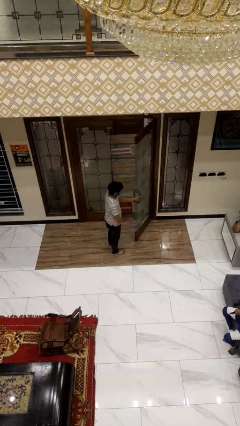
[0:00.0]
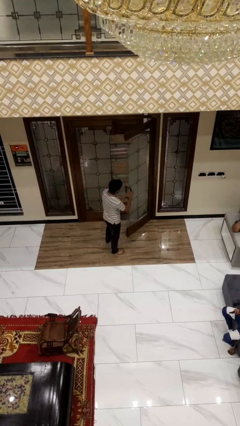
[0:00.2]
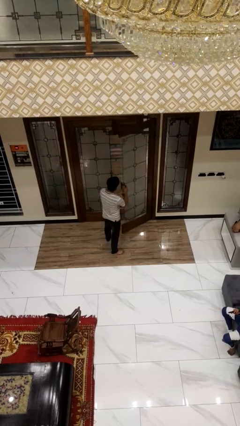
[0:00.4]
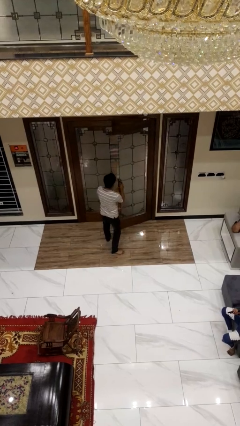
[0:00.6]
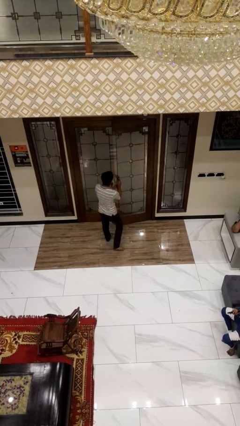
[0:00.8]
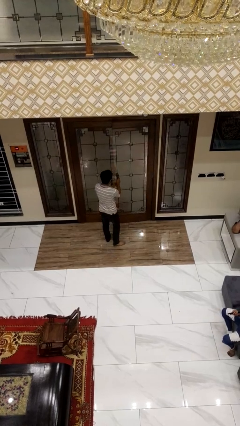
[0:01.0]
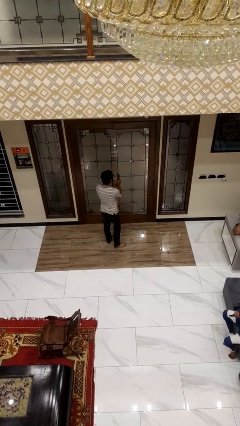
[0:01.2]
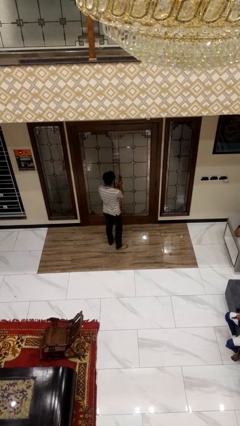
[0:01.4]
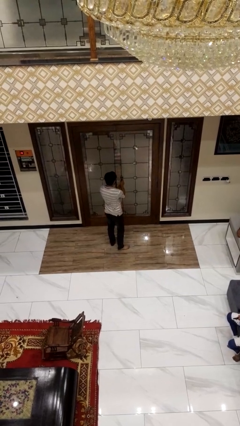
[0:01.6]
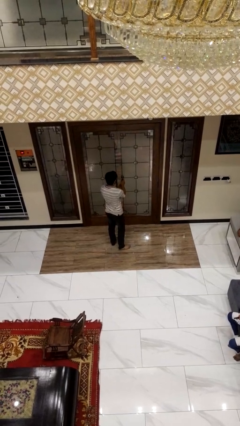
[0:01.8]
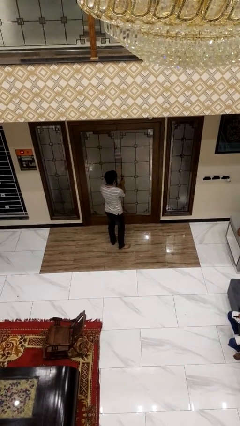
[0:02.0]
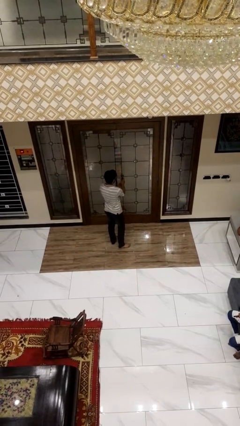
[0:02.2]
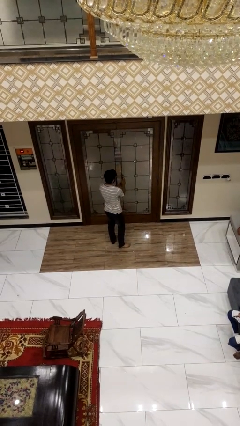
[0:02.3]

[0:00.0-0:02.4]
person closes facility door

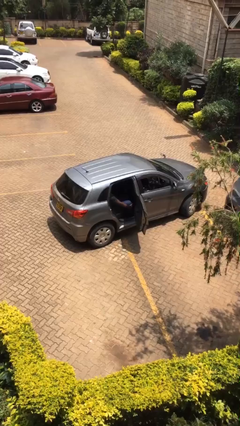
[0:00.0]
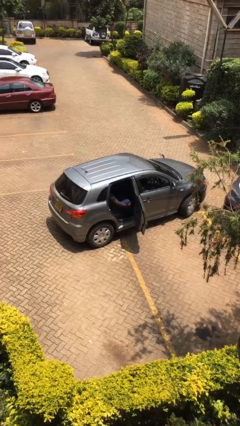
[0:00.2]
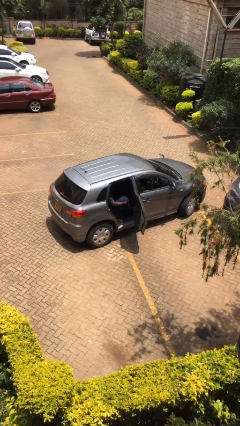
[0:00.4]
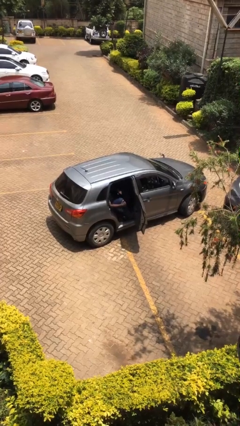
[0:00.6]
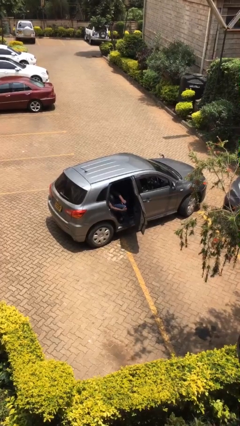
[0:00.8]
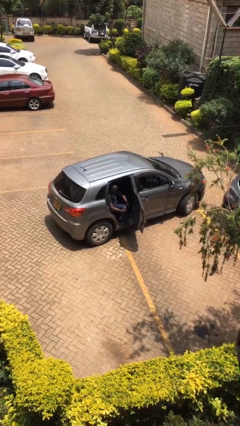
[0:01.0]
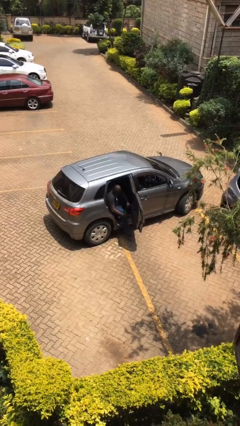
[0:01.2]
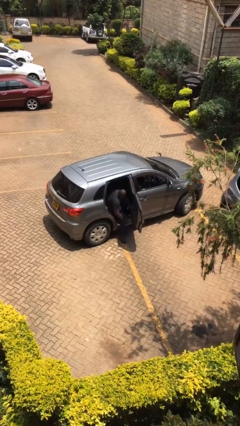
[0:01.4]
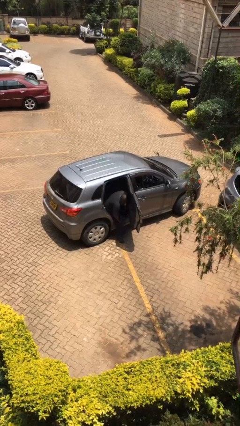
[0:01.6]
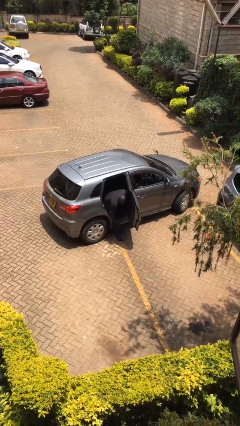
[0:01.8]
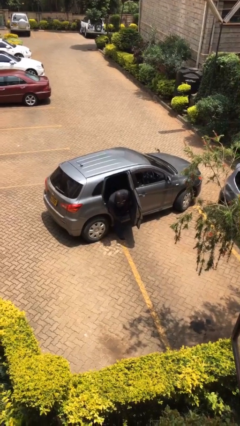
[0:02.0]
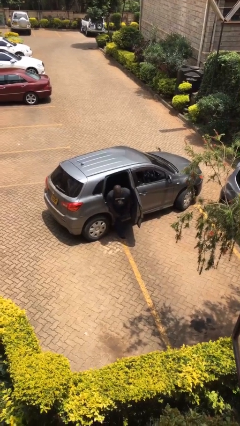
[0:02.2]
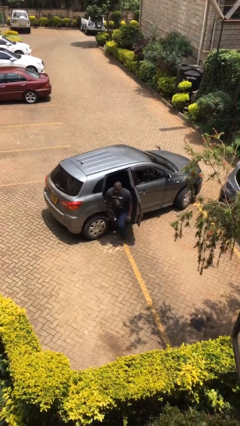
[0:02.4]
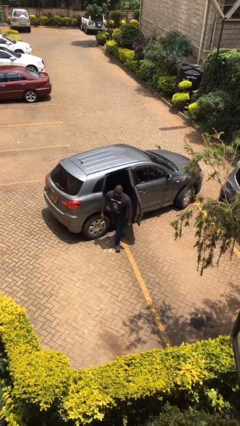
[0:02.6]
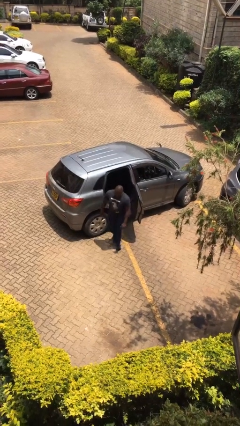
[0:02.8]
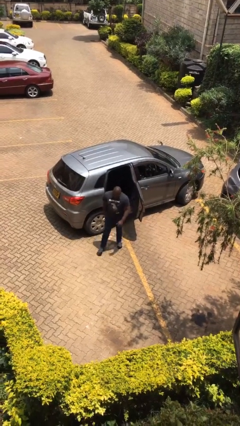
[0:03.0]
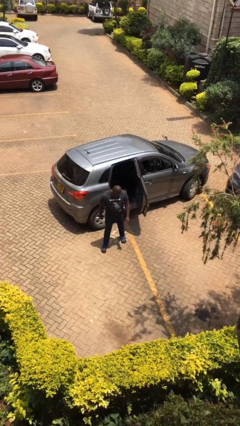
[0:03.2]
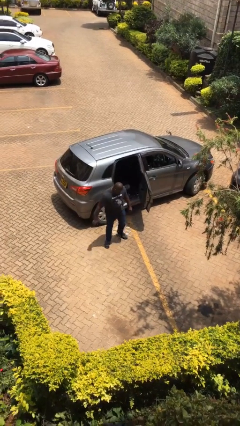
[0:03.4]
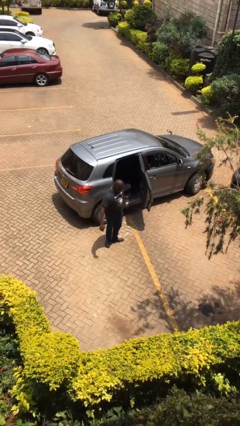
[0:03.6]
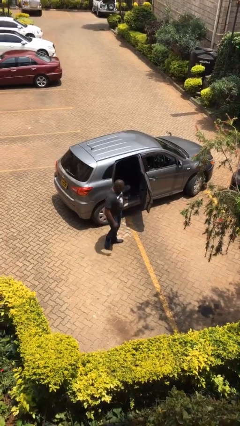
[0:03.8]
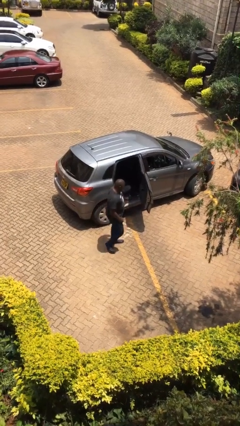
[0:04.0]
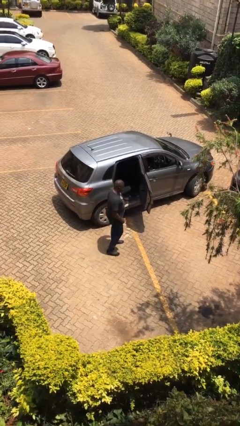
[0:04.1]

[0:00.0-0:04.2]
person exits car

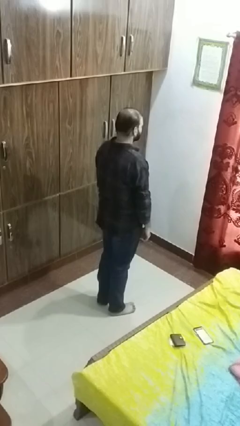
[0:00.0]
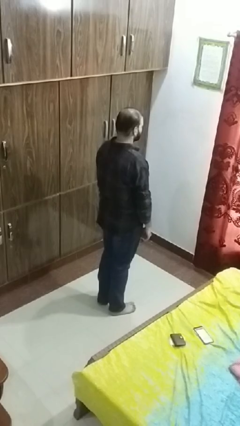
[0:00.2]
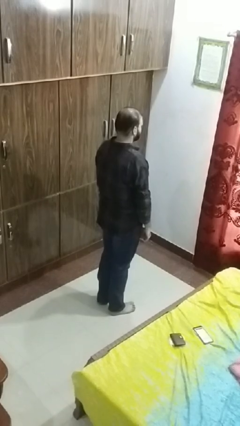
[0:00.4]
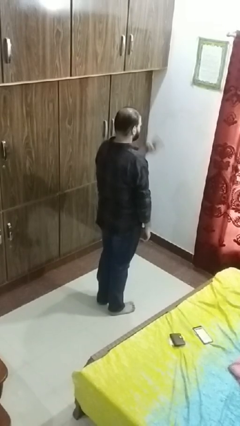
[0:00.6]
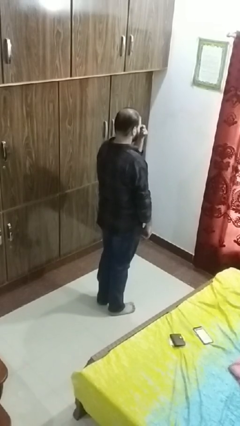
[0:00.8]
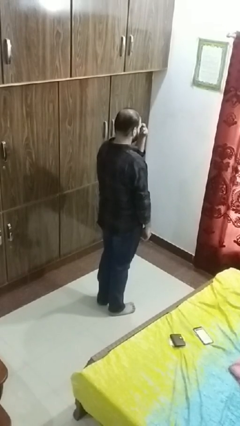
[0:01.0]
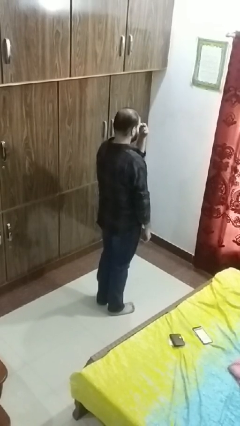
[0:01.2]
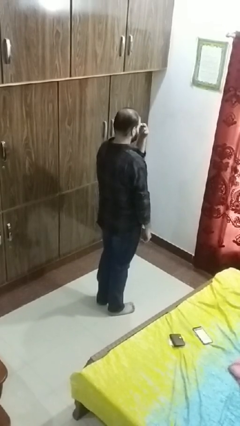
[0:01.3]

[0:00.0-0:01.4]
person gestures watch closely

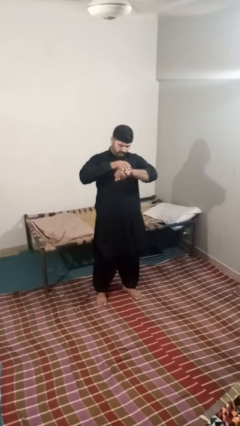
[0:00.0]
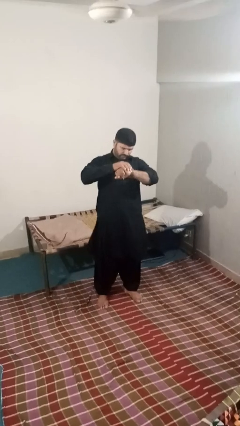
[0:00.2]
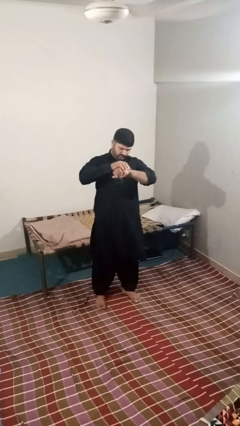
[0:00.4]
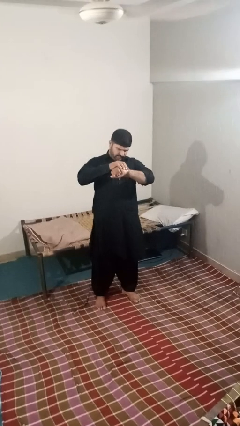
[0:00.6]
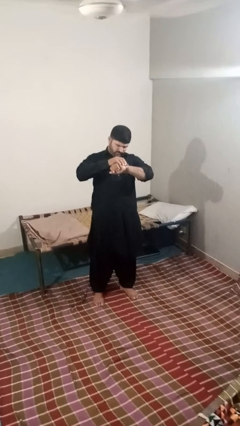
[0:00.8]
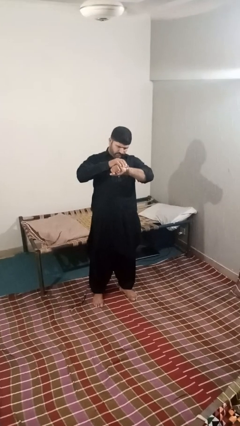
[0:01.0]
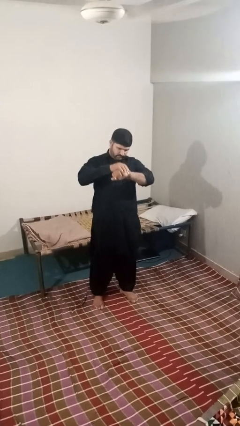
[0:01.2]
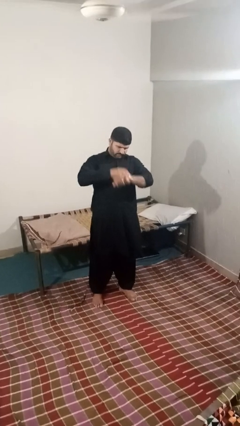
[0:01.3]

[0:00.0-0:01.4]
person looks at wristwatch

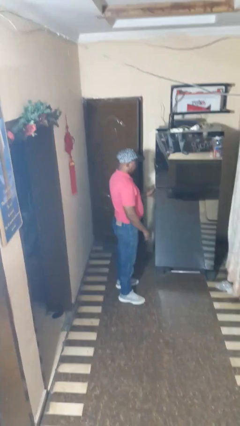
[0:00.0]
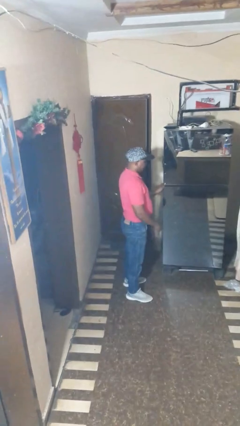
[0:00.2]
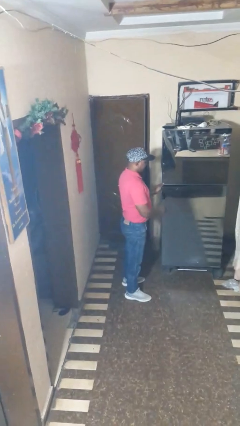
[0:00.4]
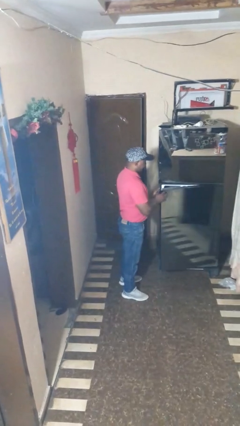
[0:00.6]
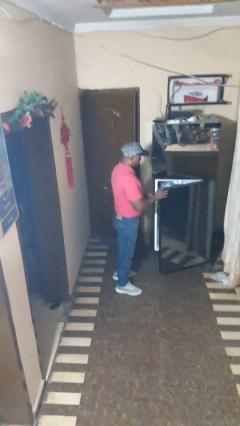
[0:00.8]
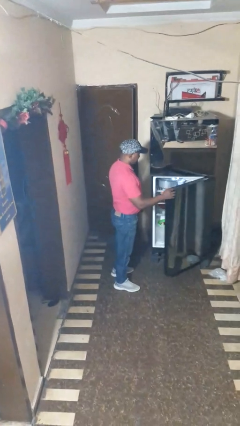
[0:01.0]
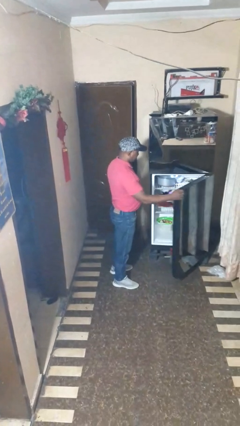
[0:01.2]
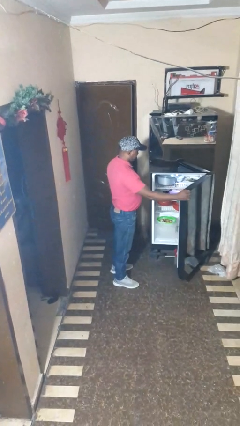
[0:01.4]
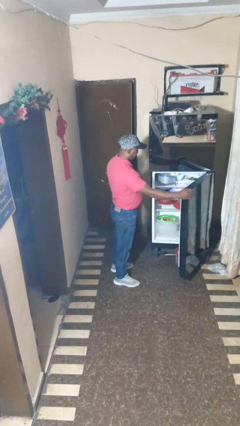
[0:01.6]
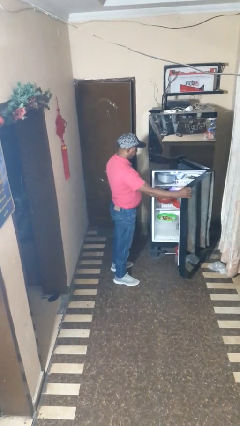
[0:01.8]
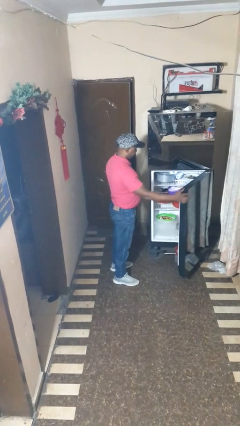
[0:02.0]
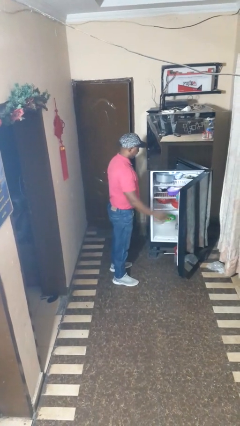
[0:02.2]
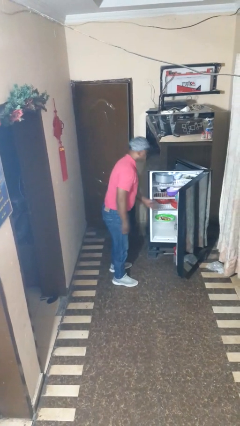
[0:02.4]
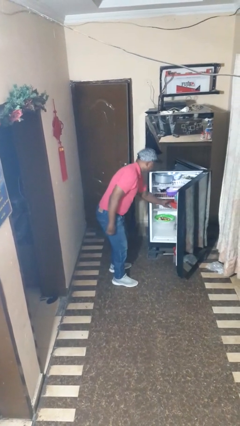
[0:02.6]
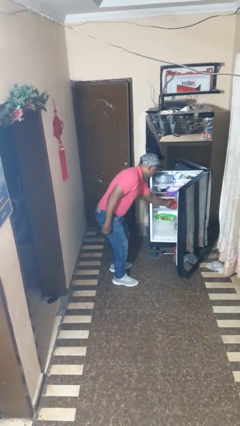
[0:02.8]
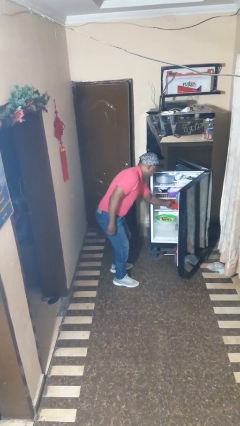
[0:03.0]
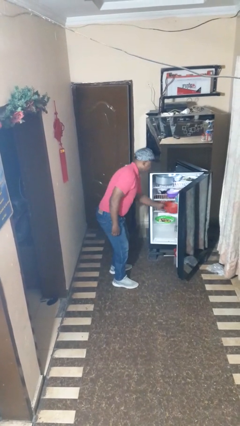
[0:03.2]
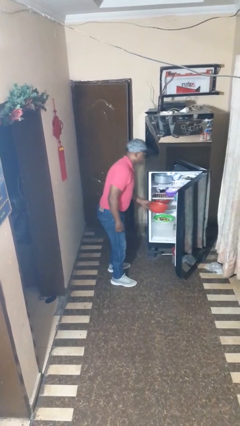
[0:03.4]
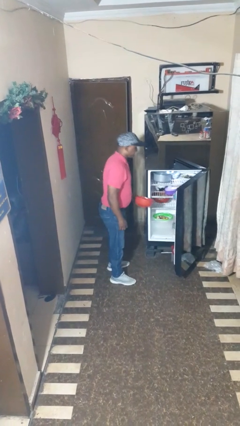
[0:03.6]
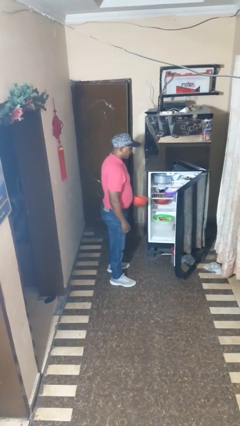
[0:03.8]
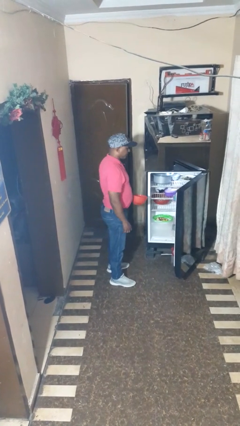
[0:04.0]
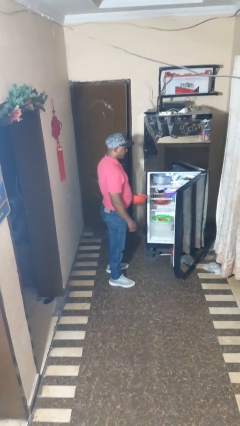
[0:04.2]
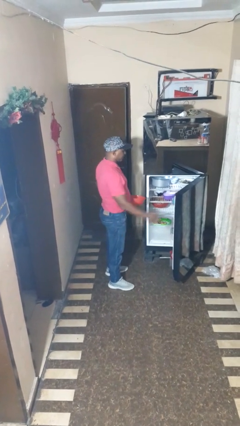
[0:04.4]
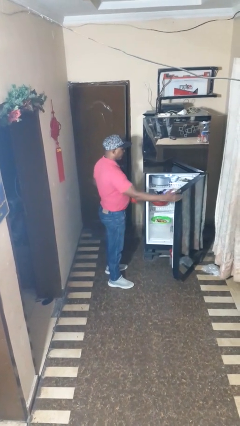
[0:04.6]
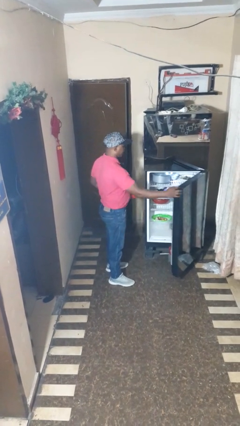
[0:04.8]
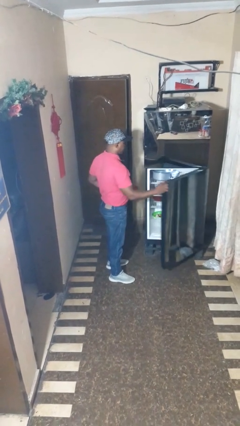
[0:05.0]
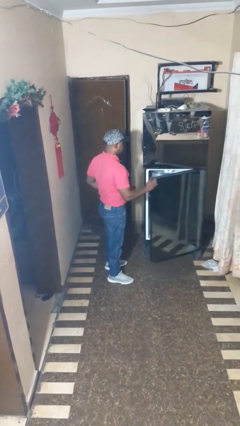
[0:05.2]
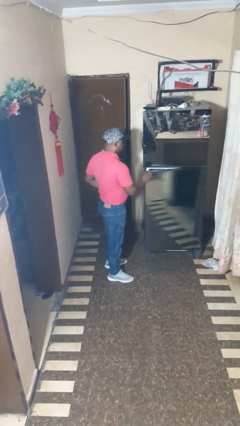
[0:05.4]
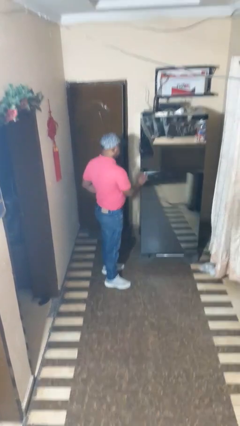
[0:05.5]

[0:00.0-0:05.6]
person takes object from refrigerator

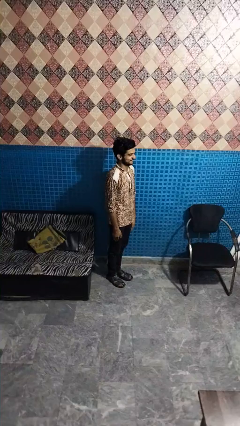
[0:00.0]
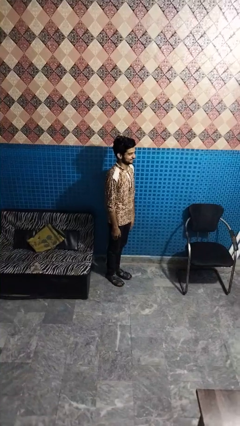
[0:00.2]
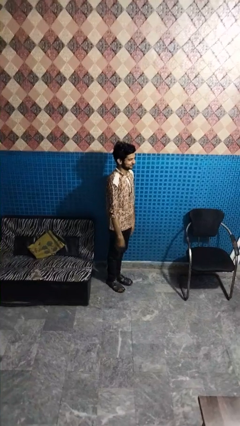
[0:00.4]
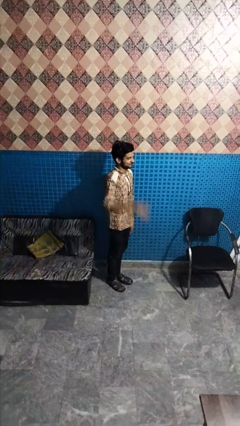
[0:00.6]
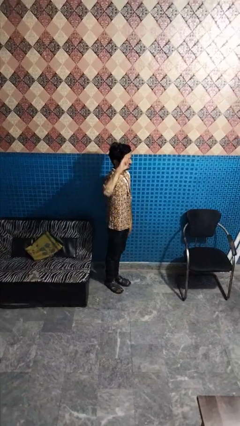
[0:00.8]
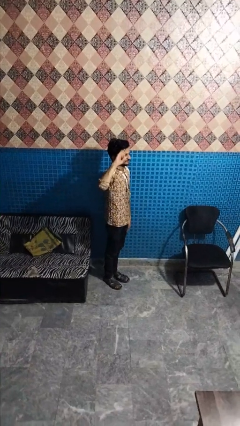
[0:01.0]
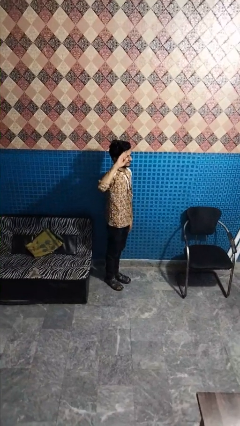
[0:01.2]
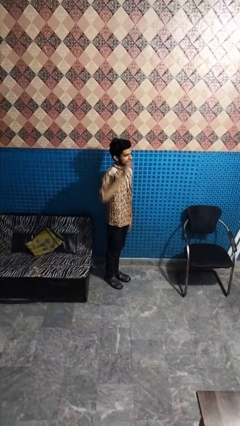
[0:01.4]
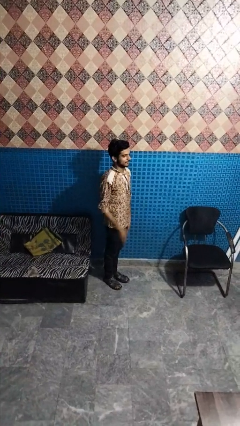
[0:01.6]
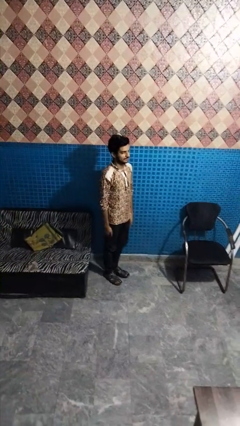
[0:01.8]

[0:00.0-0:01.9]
person salutes

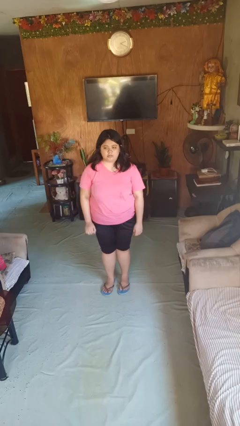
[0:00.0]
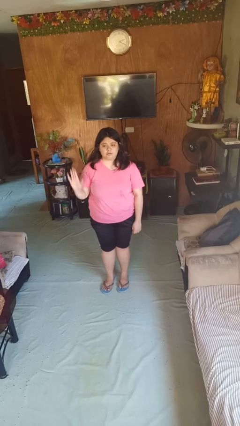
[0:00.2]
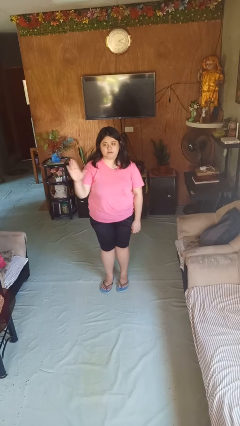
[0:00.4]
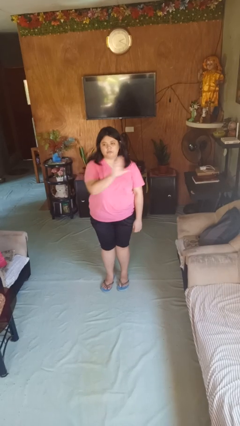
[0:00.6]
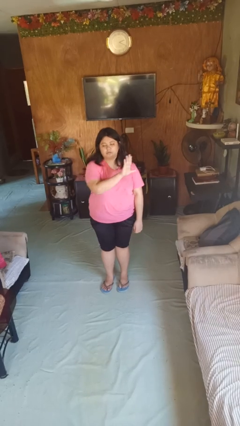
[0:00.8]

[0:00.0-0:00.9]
person gestures swipe left
